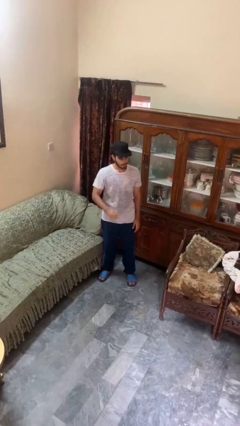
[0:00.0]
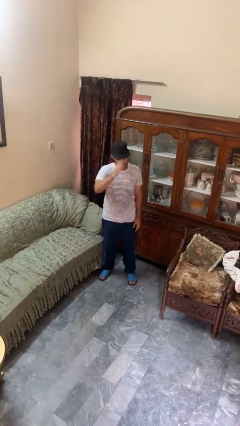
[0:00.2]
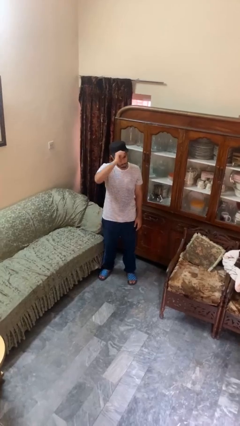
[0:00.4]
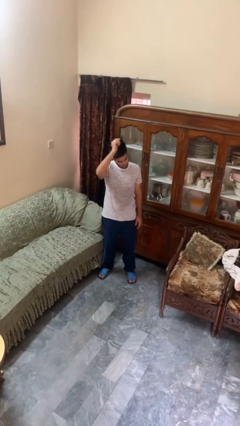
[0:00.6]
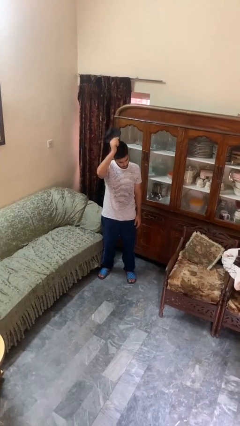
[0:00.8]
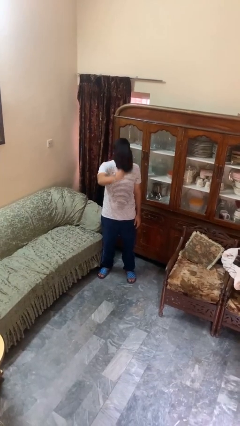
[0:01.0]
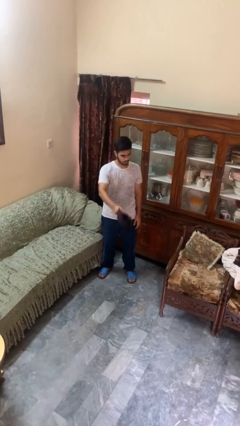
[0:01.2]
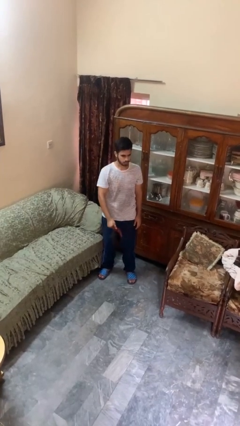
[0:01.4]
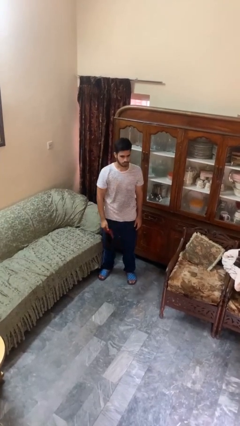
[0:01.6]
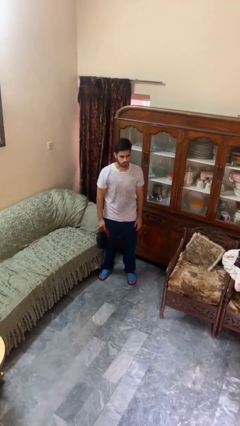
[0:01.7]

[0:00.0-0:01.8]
person takes off hat

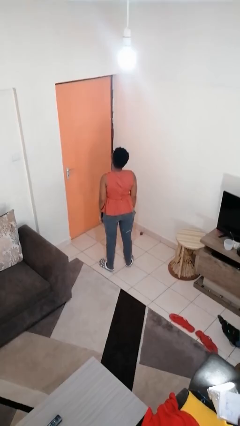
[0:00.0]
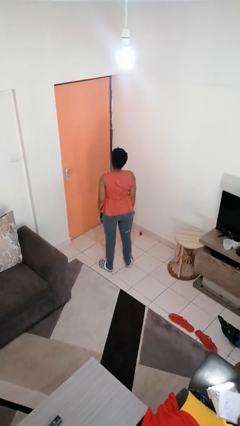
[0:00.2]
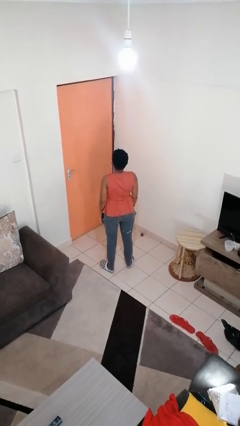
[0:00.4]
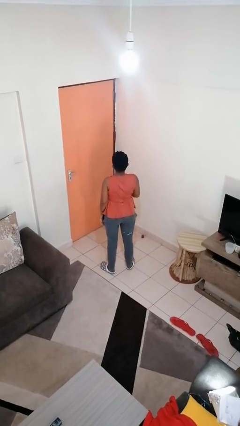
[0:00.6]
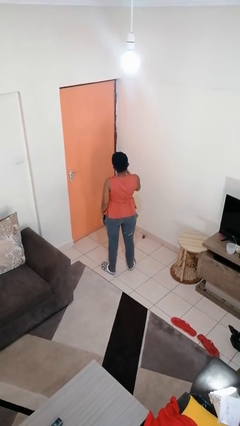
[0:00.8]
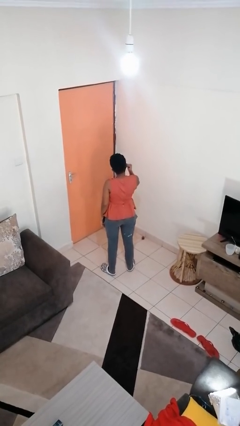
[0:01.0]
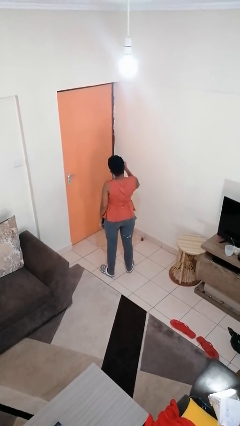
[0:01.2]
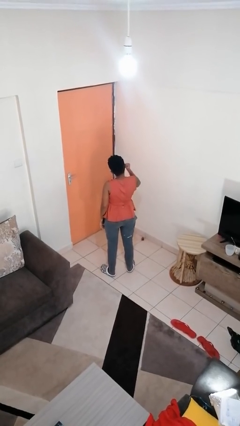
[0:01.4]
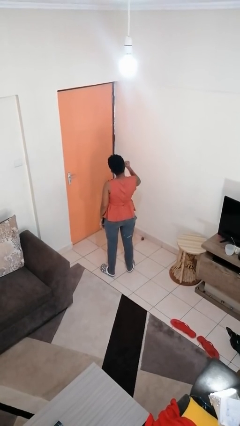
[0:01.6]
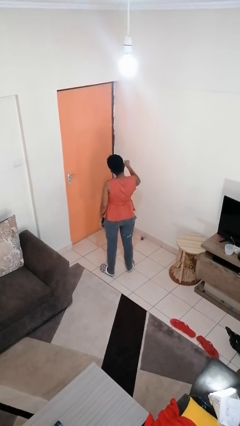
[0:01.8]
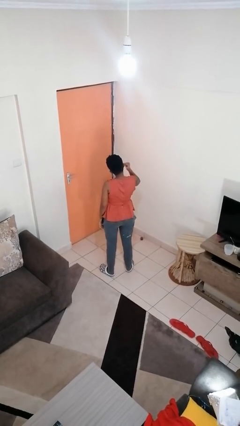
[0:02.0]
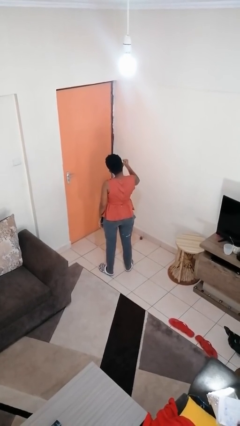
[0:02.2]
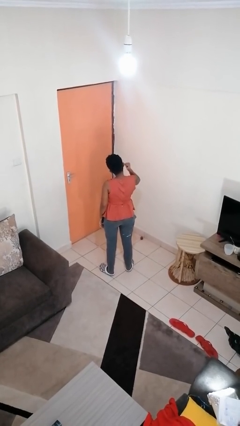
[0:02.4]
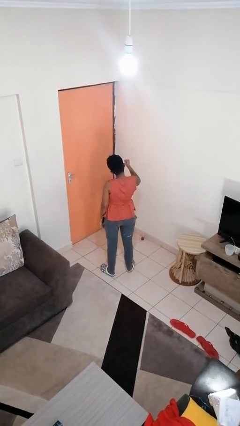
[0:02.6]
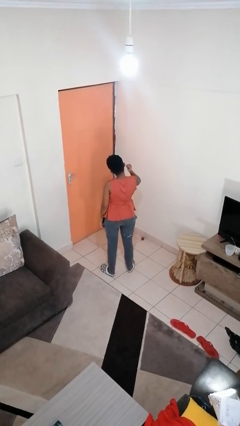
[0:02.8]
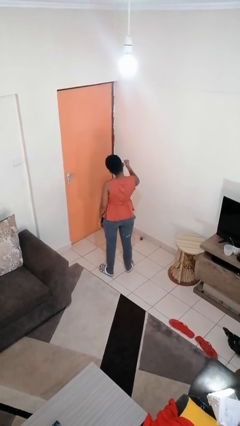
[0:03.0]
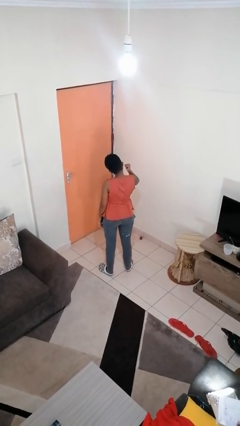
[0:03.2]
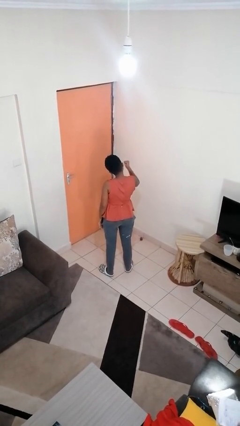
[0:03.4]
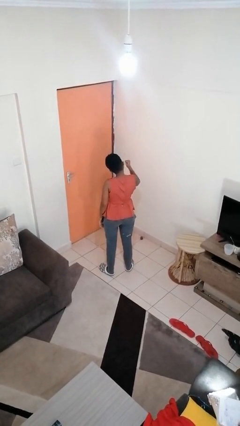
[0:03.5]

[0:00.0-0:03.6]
person gestures behind me

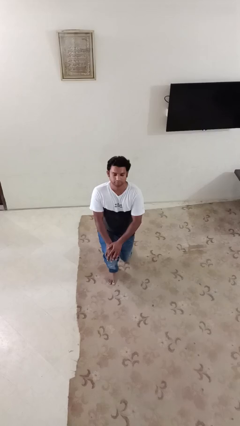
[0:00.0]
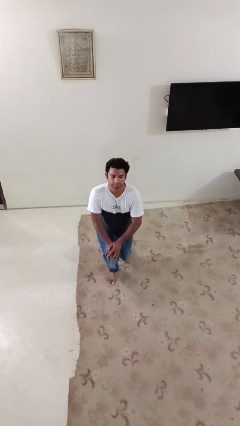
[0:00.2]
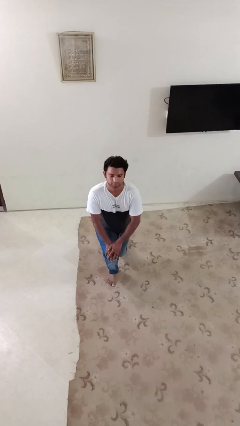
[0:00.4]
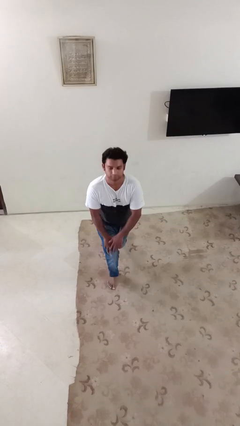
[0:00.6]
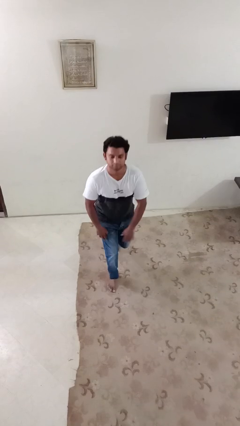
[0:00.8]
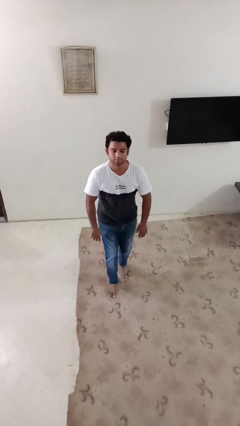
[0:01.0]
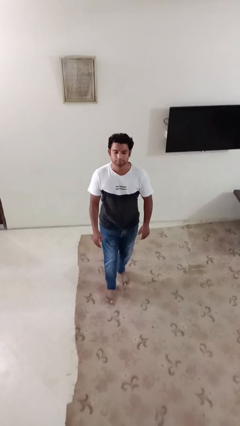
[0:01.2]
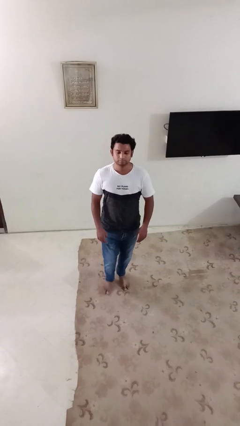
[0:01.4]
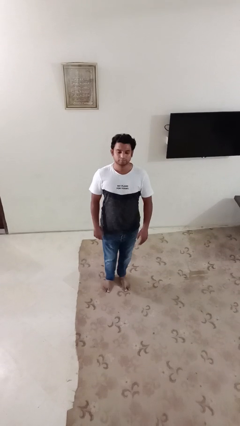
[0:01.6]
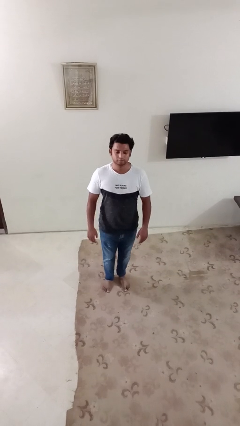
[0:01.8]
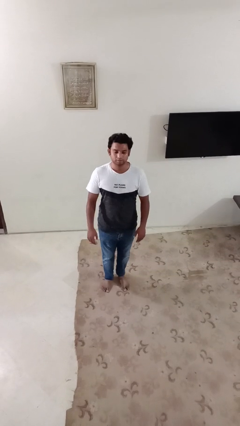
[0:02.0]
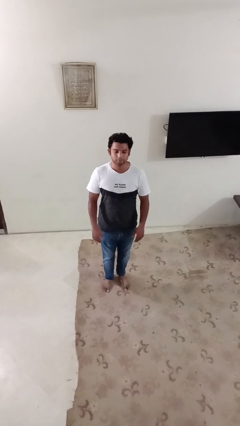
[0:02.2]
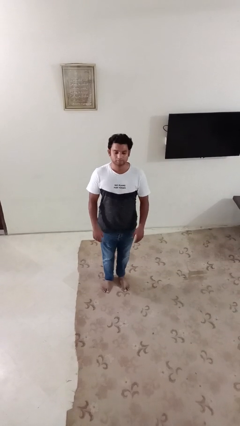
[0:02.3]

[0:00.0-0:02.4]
person stands up from floor

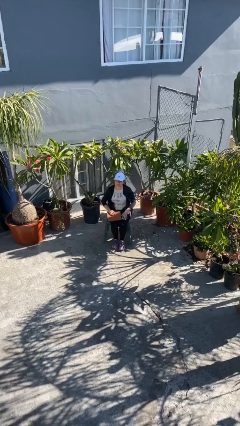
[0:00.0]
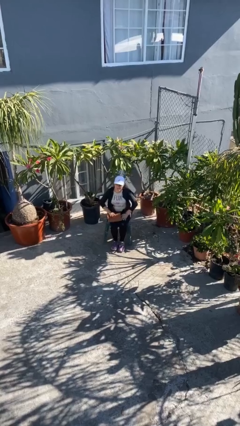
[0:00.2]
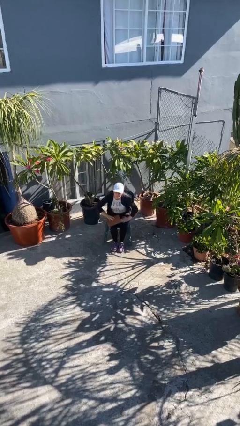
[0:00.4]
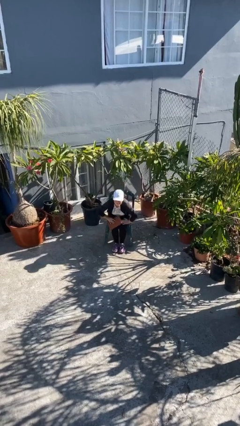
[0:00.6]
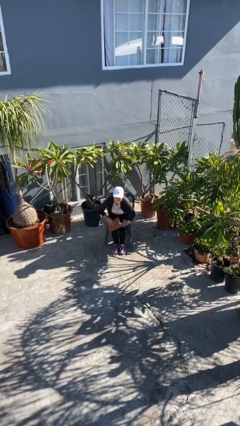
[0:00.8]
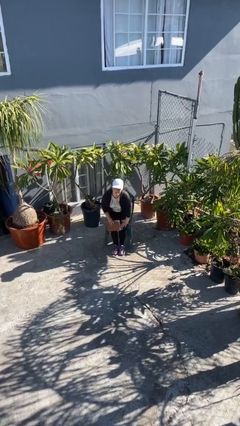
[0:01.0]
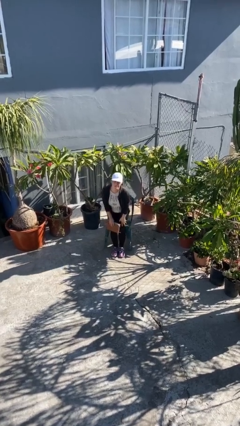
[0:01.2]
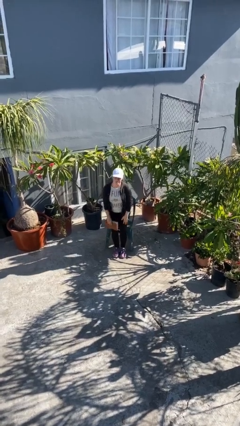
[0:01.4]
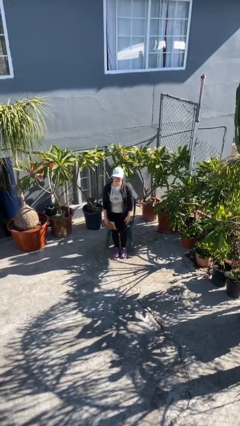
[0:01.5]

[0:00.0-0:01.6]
person stands up

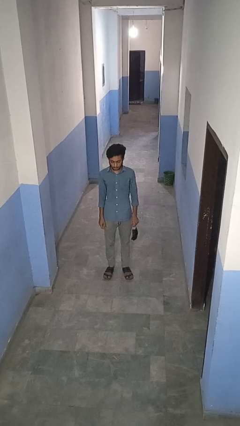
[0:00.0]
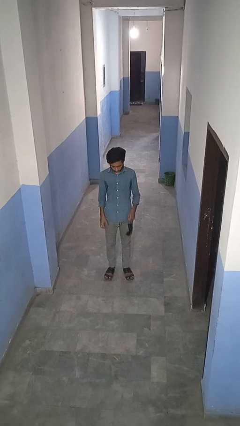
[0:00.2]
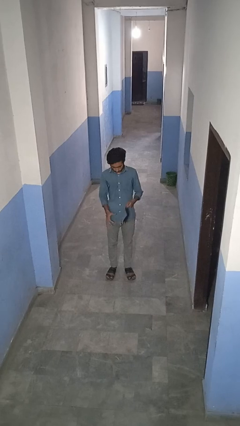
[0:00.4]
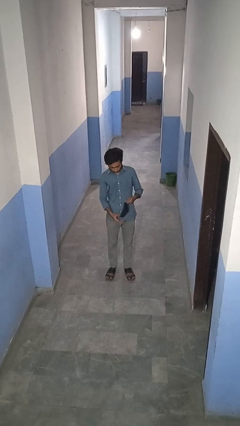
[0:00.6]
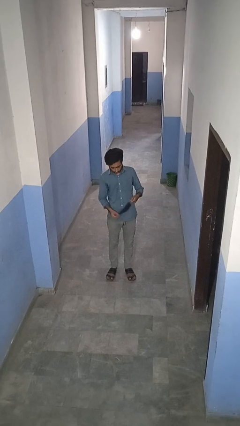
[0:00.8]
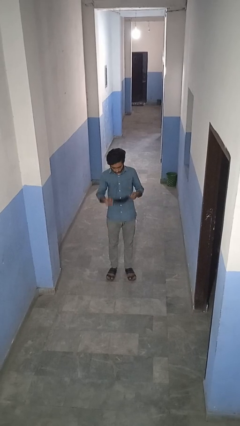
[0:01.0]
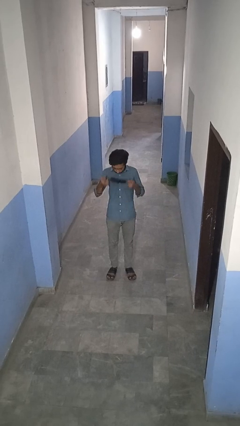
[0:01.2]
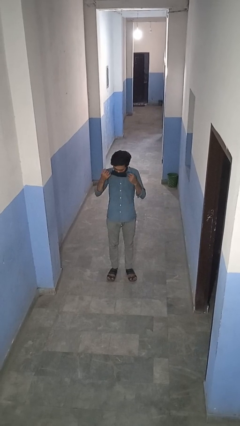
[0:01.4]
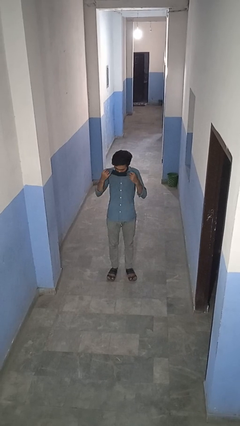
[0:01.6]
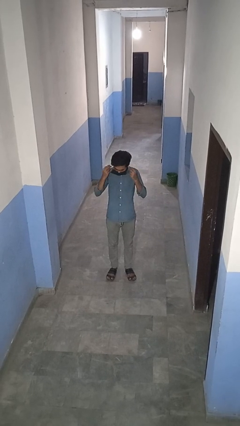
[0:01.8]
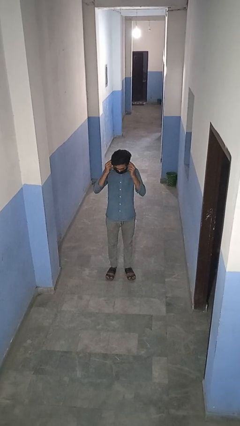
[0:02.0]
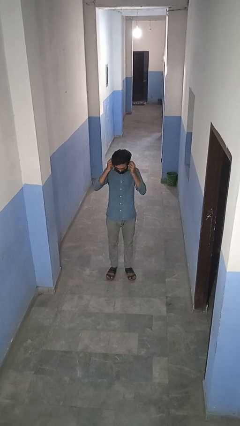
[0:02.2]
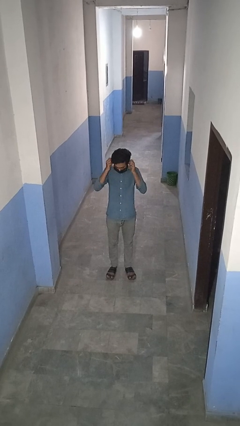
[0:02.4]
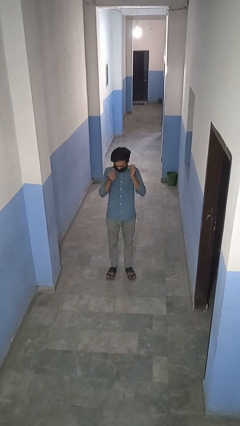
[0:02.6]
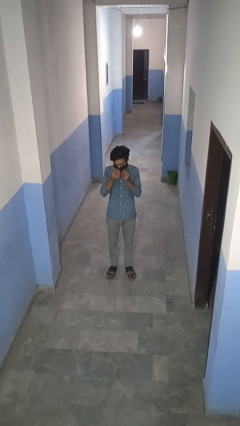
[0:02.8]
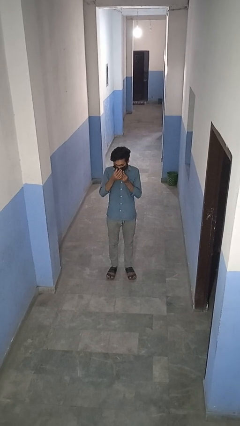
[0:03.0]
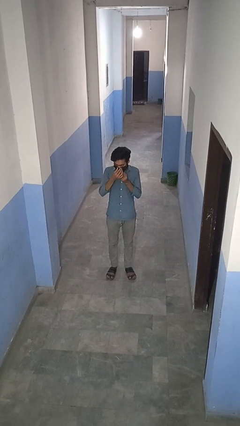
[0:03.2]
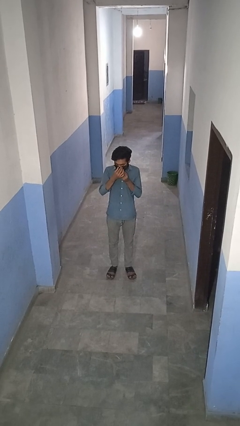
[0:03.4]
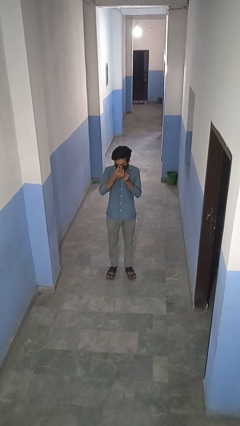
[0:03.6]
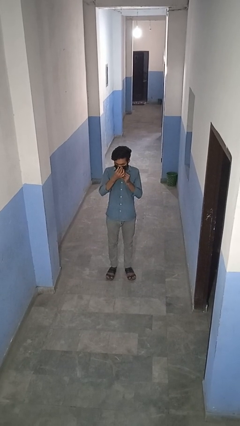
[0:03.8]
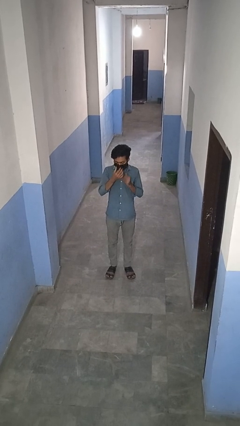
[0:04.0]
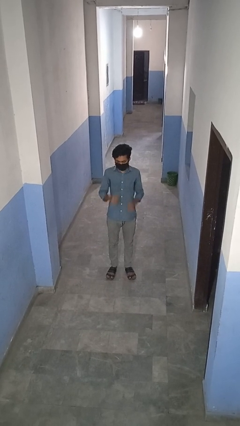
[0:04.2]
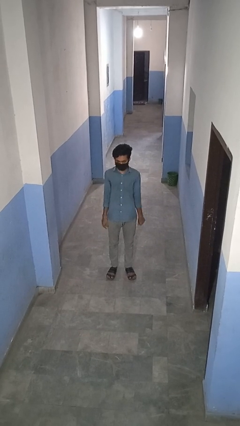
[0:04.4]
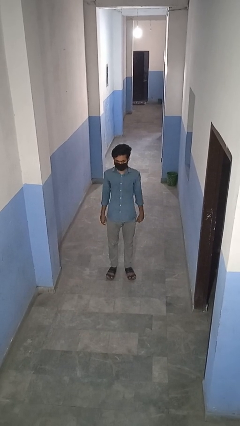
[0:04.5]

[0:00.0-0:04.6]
person puts on facemask

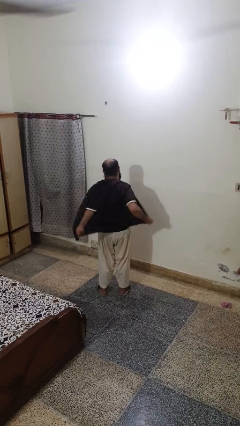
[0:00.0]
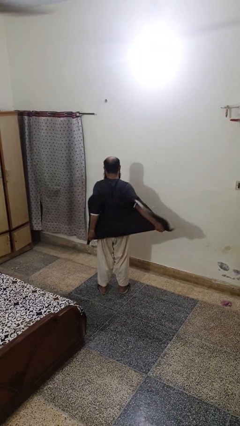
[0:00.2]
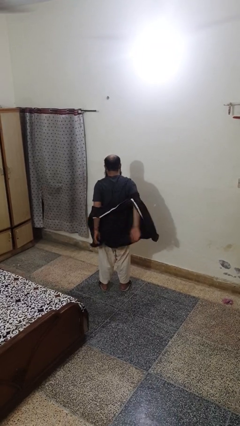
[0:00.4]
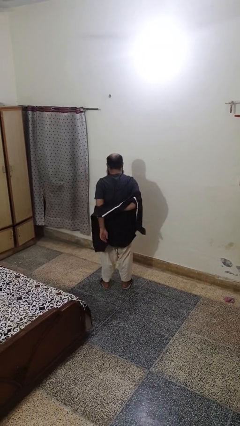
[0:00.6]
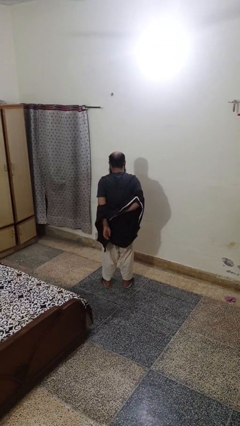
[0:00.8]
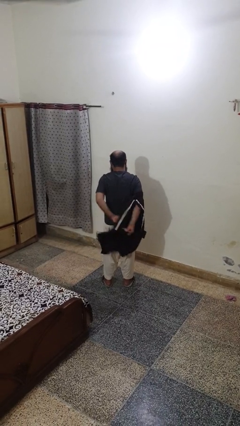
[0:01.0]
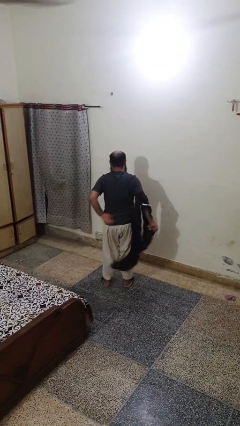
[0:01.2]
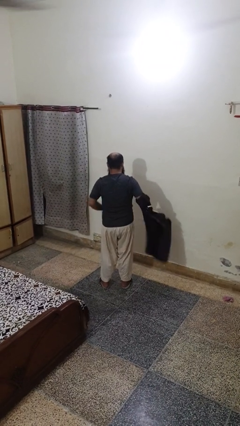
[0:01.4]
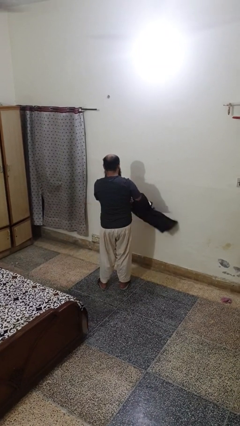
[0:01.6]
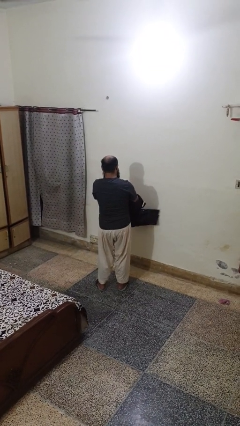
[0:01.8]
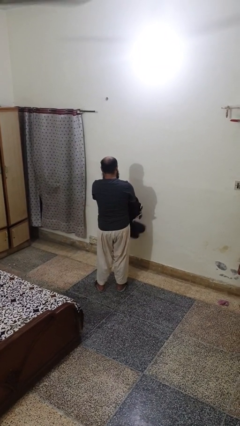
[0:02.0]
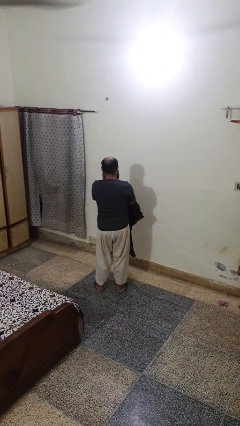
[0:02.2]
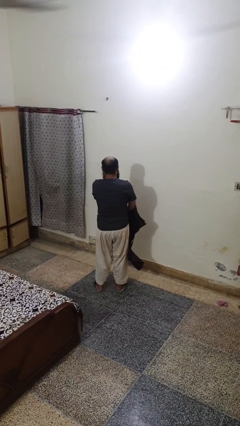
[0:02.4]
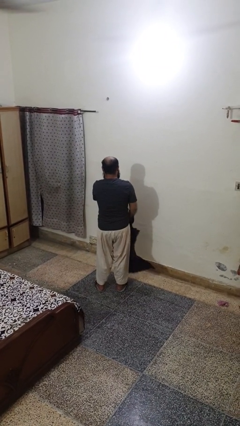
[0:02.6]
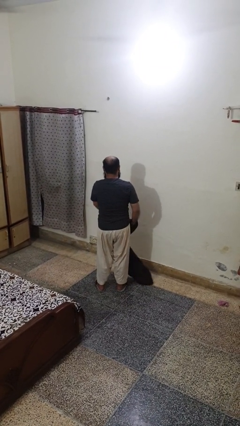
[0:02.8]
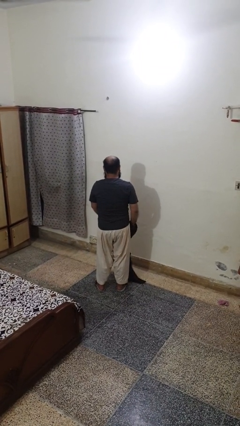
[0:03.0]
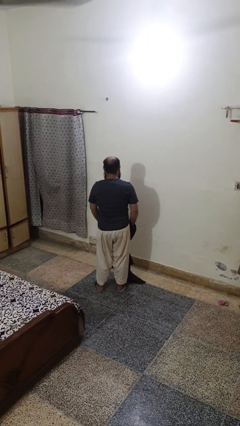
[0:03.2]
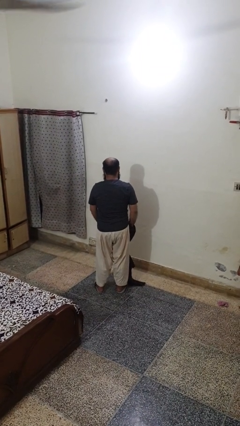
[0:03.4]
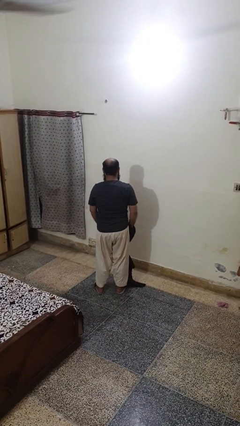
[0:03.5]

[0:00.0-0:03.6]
person takes off shirt
